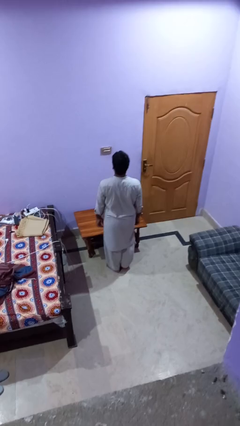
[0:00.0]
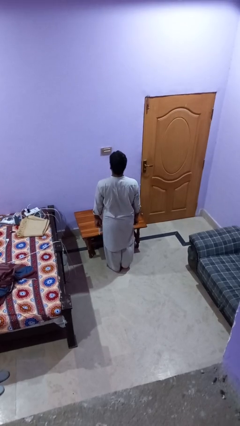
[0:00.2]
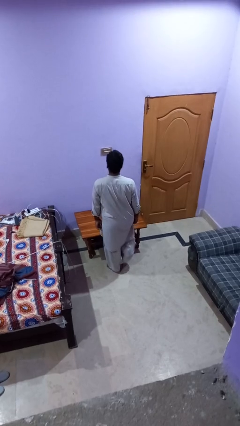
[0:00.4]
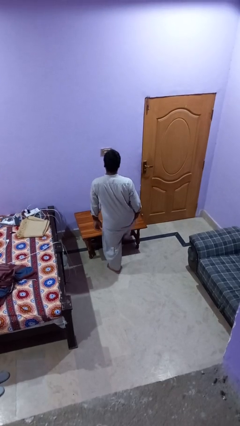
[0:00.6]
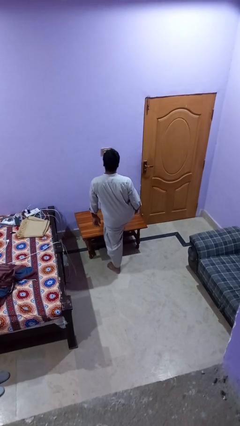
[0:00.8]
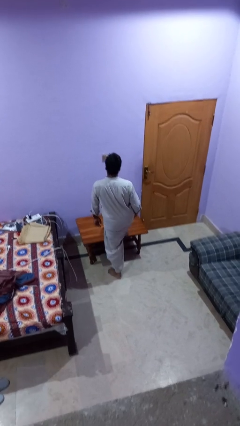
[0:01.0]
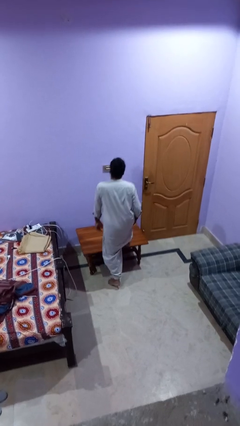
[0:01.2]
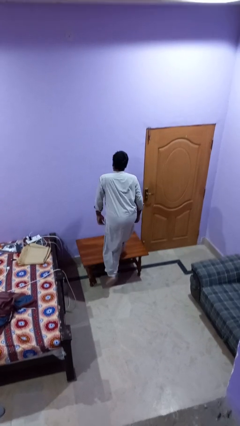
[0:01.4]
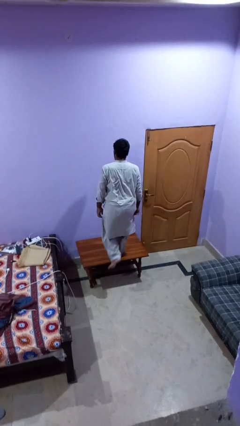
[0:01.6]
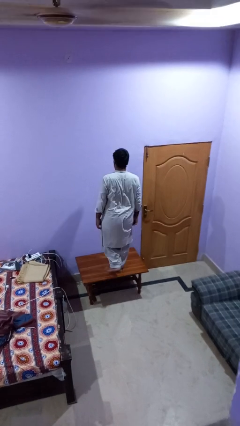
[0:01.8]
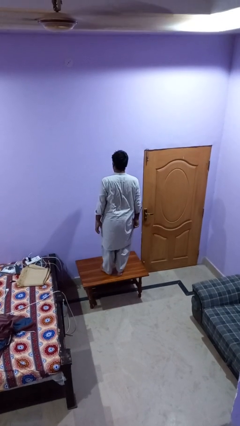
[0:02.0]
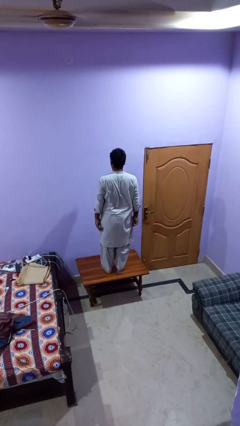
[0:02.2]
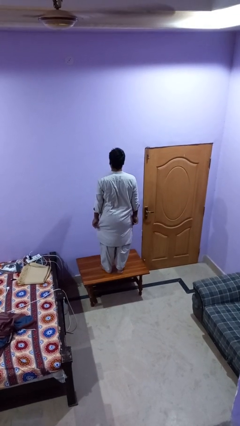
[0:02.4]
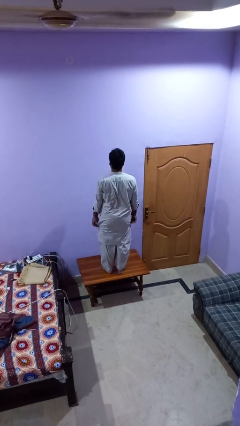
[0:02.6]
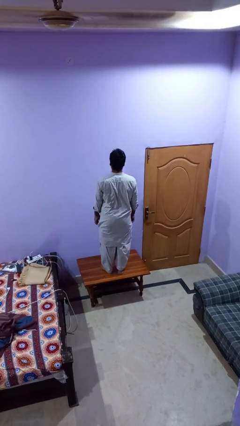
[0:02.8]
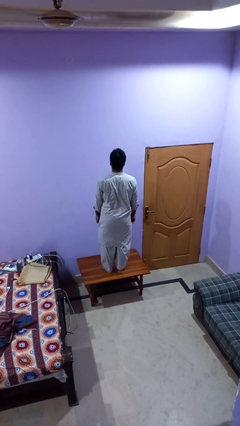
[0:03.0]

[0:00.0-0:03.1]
person climbs on table

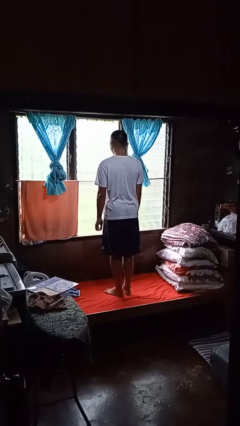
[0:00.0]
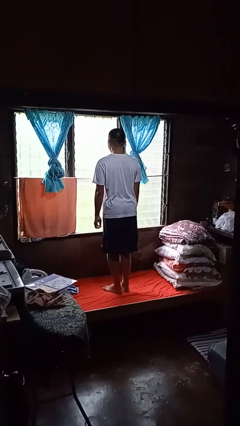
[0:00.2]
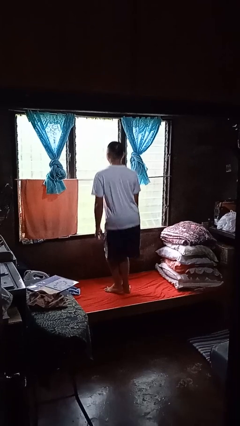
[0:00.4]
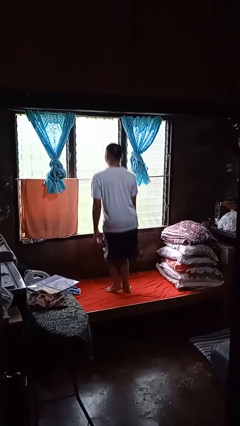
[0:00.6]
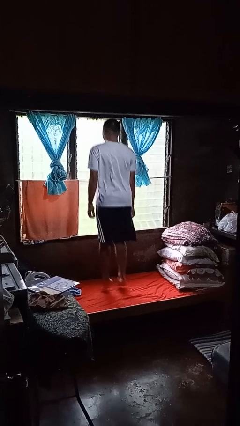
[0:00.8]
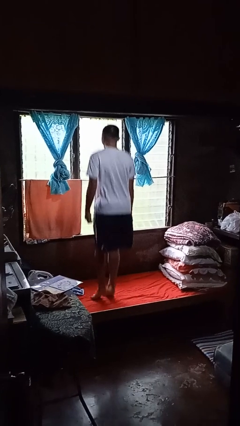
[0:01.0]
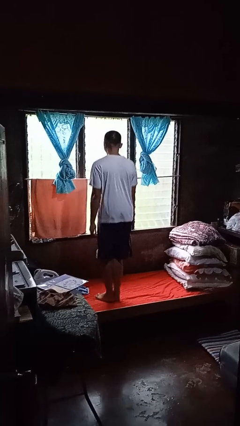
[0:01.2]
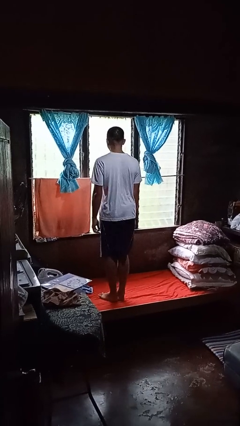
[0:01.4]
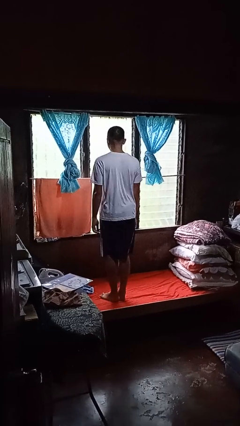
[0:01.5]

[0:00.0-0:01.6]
person jumps on bed

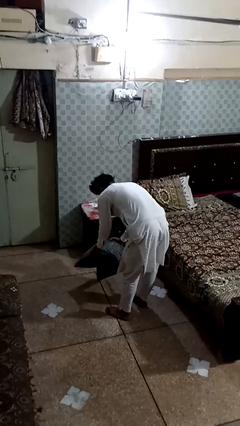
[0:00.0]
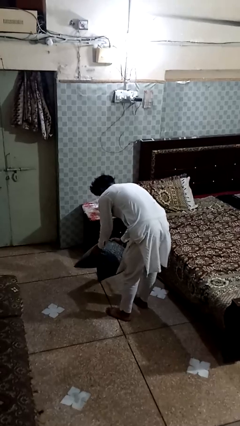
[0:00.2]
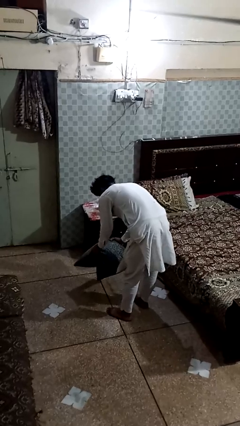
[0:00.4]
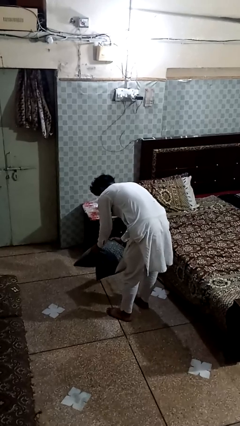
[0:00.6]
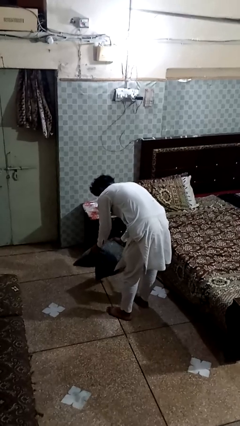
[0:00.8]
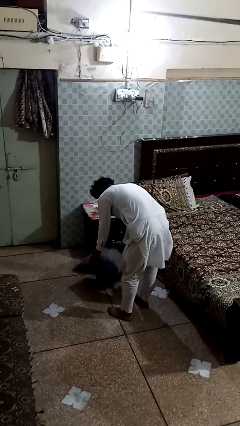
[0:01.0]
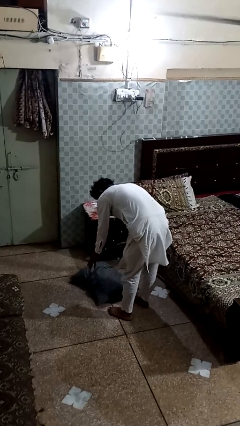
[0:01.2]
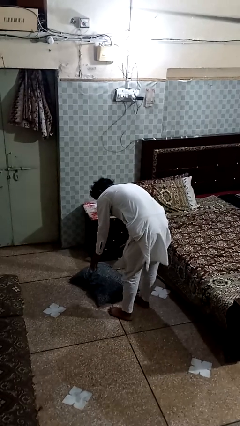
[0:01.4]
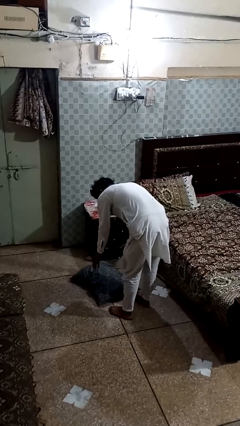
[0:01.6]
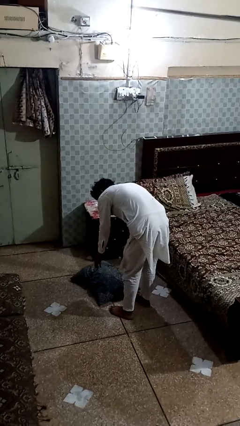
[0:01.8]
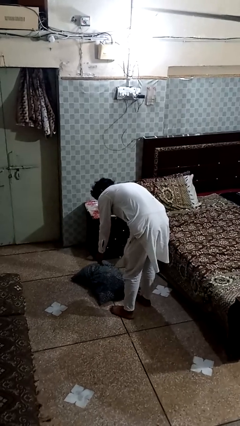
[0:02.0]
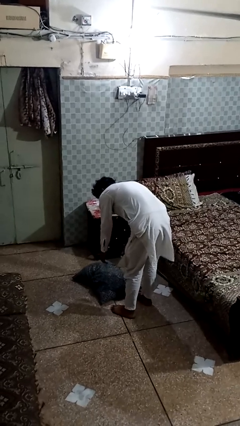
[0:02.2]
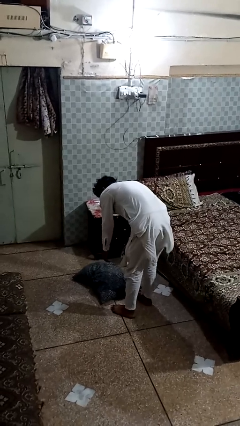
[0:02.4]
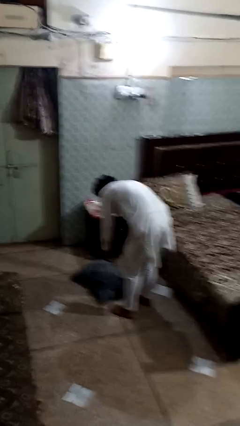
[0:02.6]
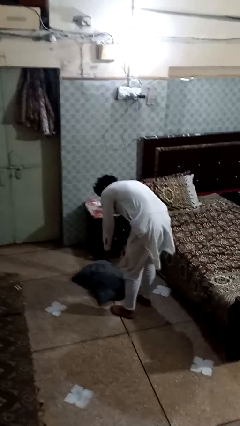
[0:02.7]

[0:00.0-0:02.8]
person catches dropped object

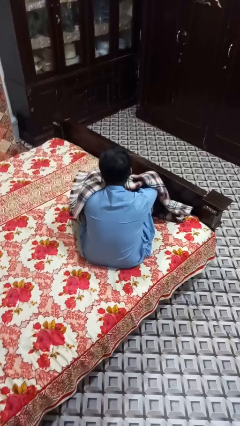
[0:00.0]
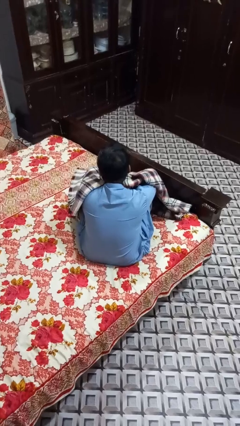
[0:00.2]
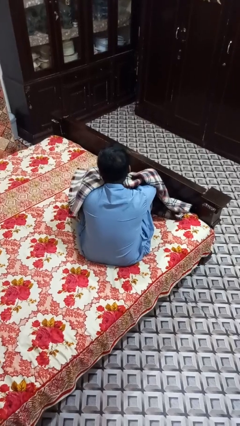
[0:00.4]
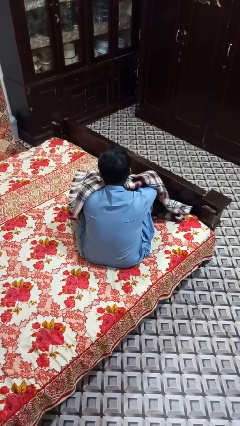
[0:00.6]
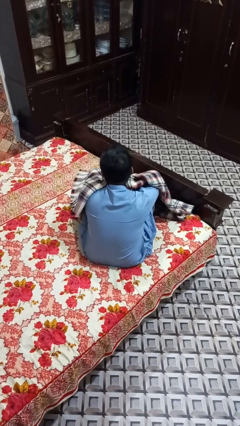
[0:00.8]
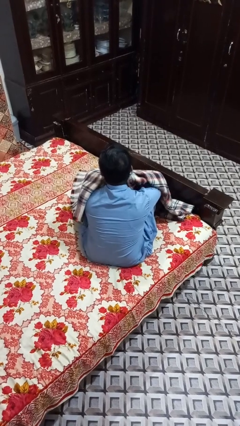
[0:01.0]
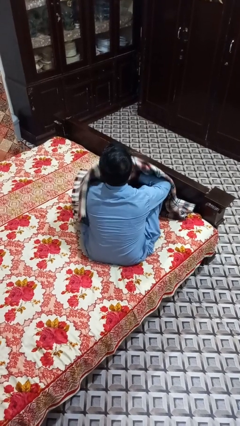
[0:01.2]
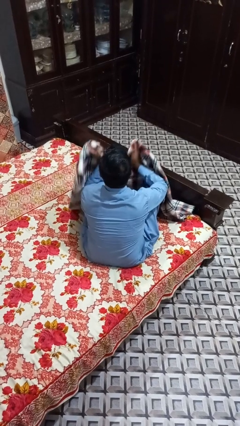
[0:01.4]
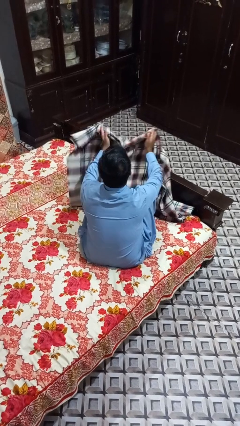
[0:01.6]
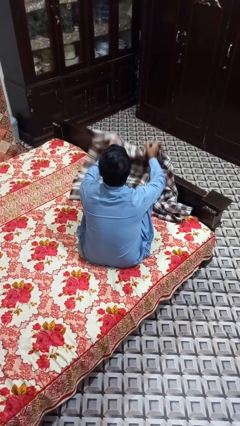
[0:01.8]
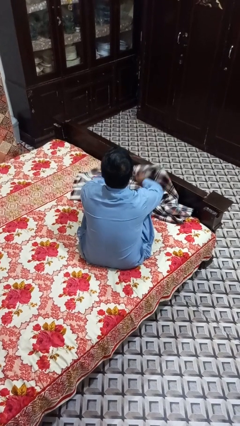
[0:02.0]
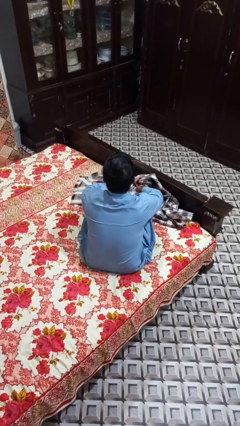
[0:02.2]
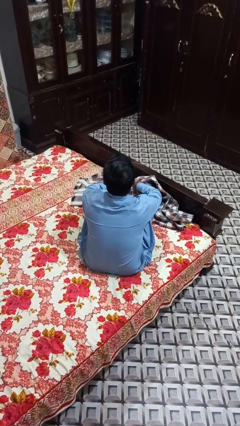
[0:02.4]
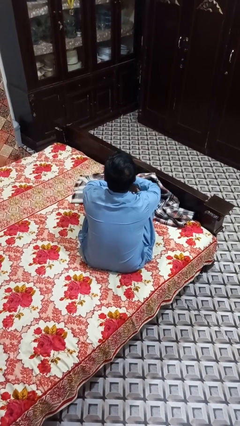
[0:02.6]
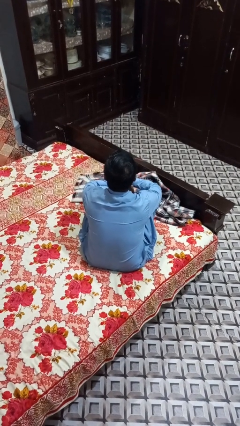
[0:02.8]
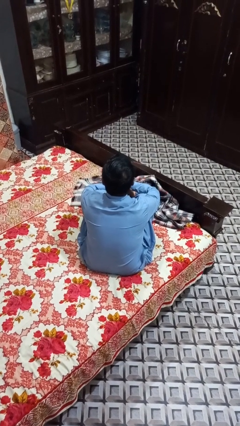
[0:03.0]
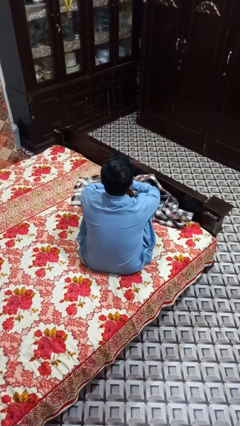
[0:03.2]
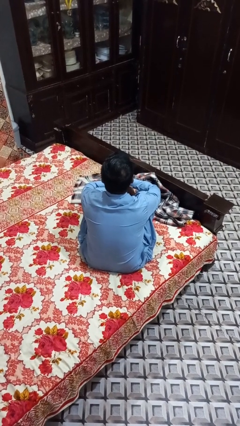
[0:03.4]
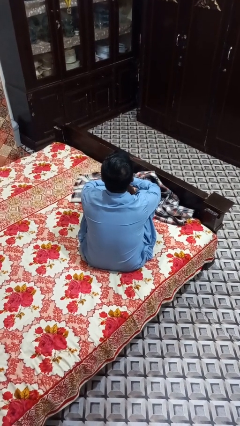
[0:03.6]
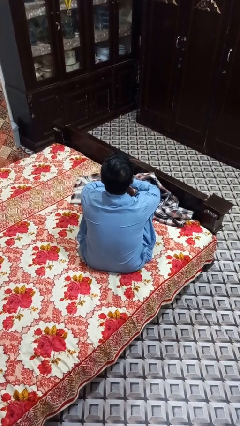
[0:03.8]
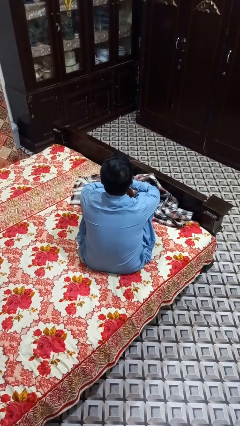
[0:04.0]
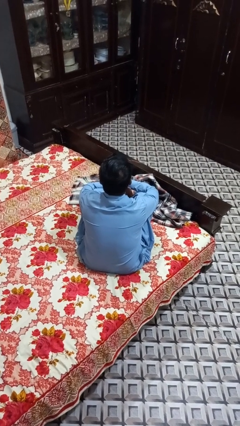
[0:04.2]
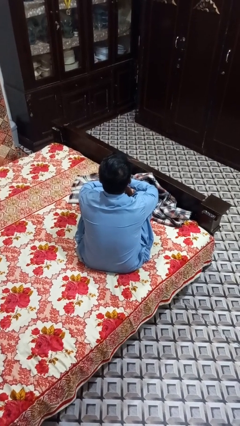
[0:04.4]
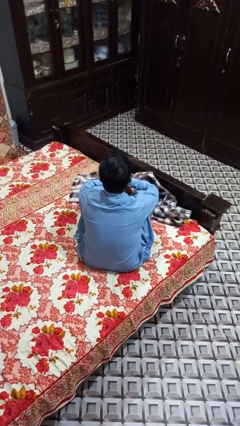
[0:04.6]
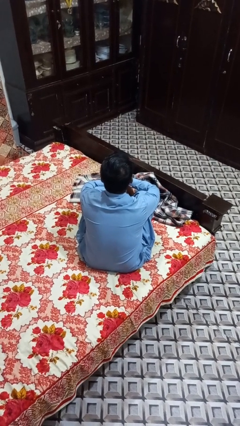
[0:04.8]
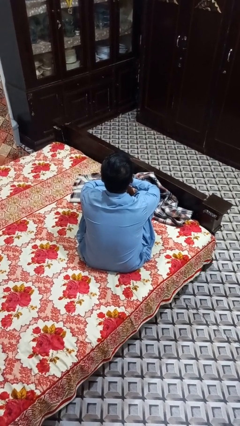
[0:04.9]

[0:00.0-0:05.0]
person uncovers with blanket

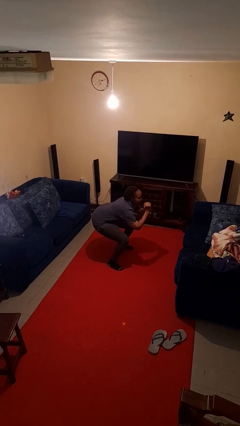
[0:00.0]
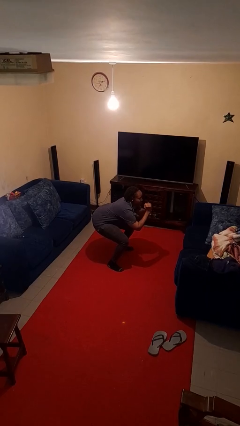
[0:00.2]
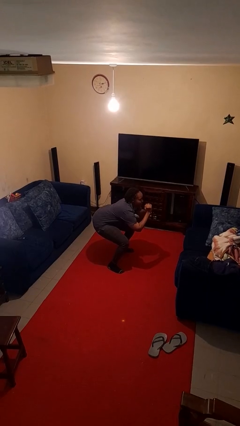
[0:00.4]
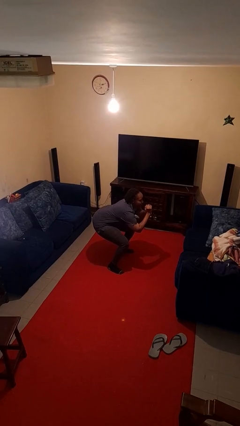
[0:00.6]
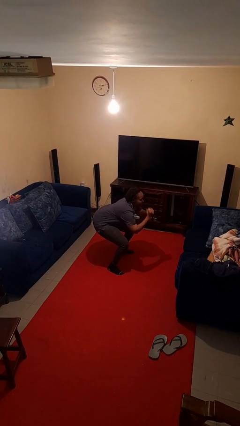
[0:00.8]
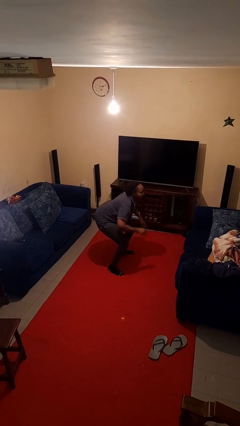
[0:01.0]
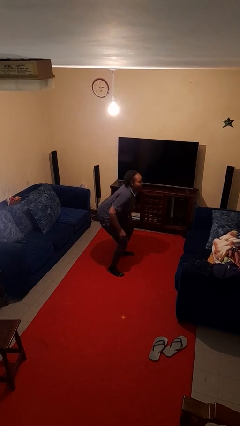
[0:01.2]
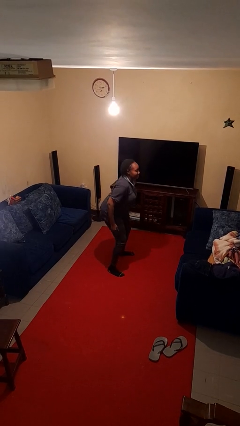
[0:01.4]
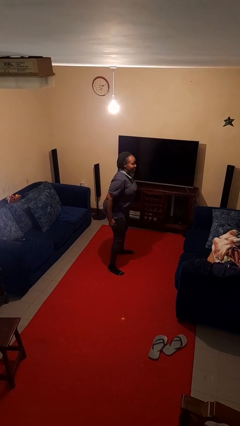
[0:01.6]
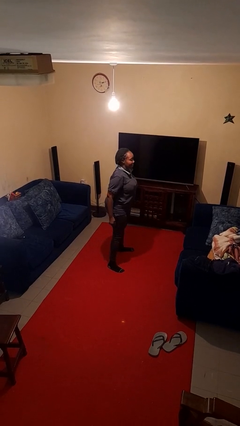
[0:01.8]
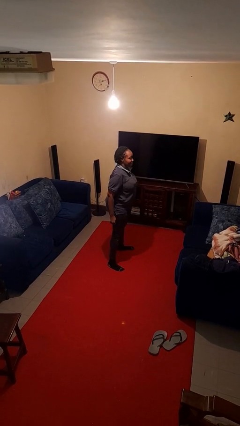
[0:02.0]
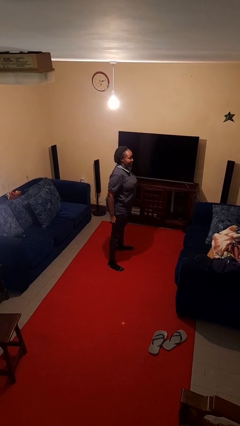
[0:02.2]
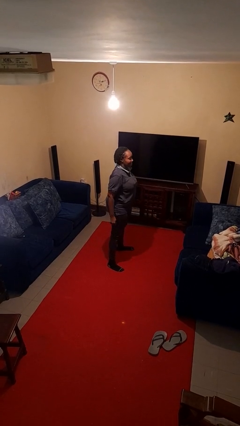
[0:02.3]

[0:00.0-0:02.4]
person stands up

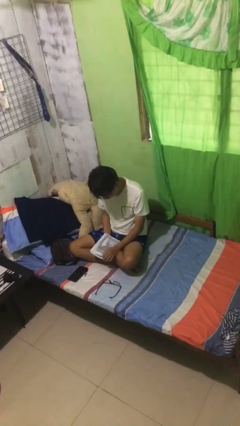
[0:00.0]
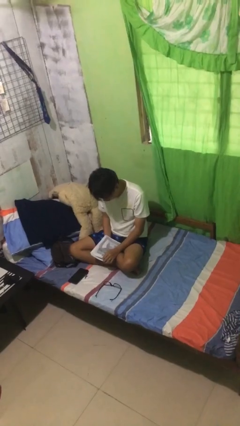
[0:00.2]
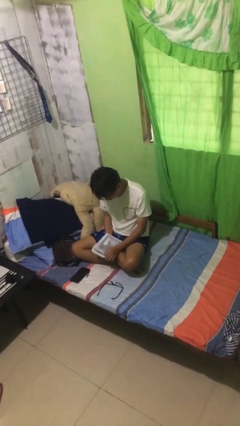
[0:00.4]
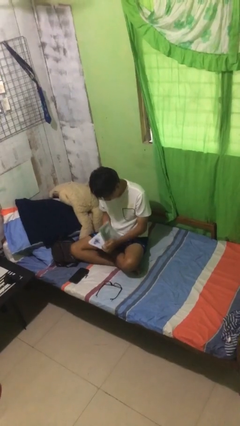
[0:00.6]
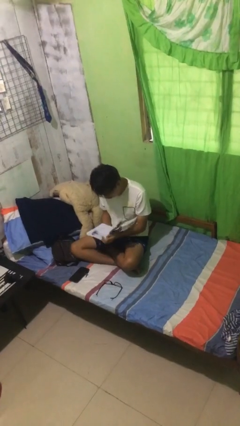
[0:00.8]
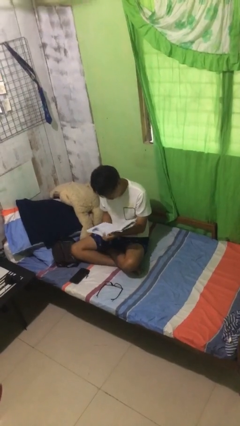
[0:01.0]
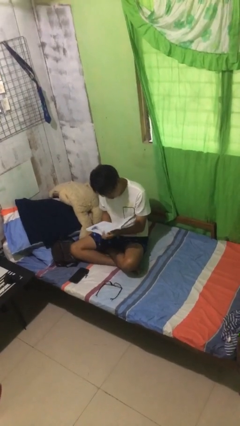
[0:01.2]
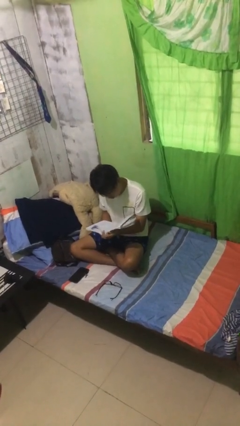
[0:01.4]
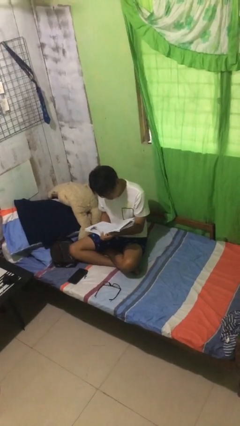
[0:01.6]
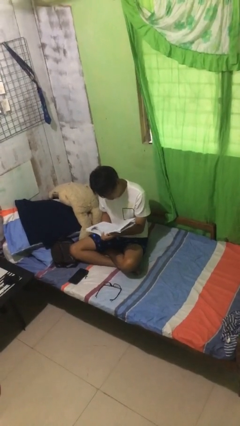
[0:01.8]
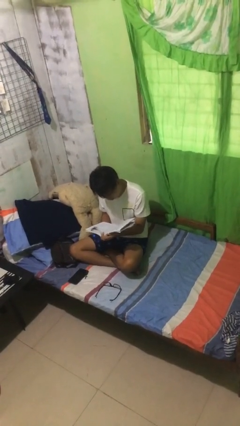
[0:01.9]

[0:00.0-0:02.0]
person reads document

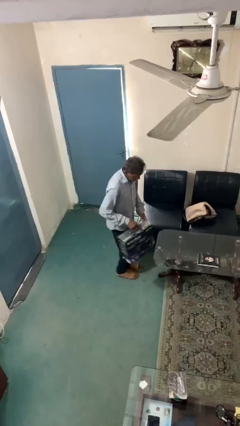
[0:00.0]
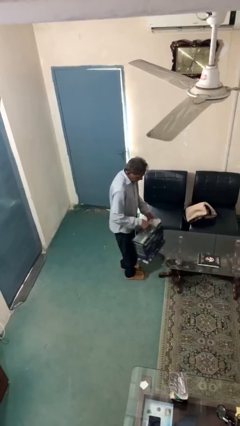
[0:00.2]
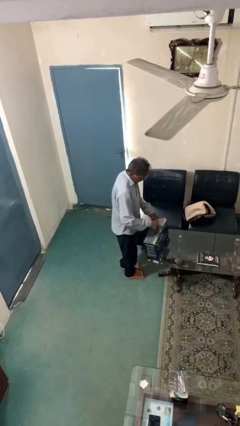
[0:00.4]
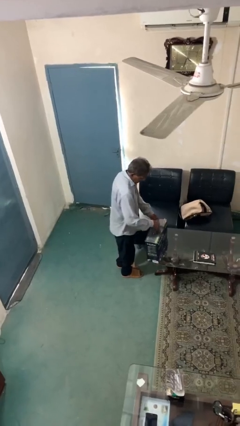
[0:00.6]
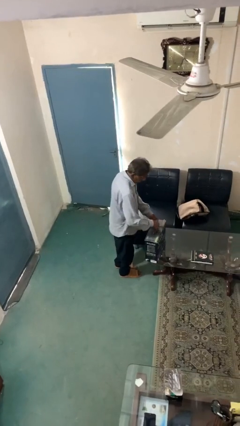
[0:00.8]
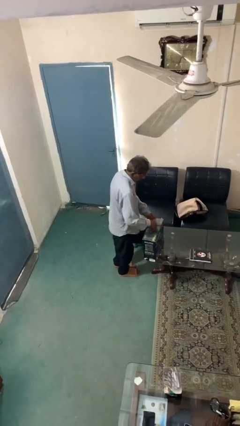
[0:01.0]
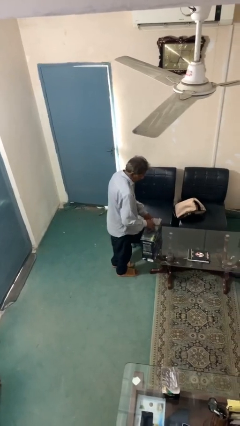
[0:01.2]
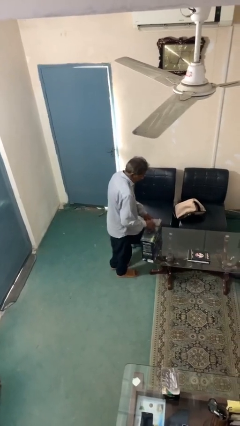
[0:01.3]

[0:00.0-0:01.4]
person puts down object on table
